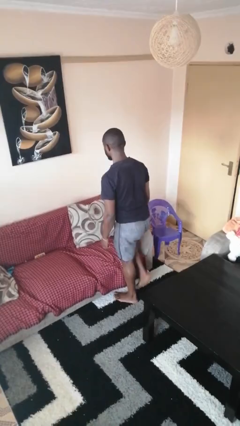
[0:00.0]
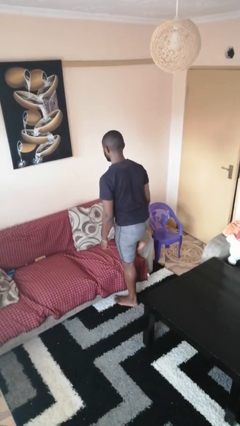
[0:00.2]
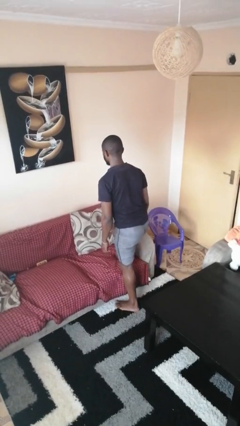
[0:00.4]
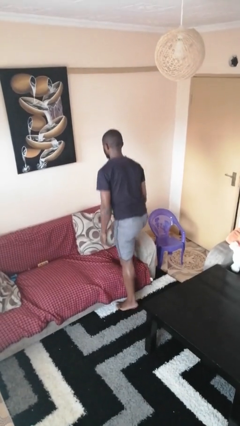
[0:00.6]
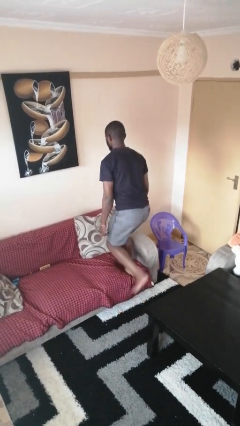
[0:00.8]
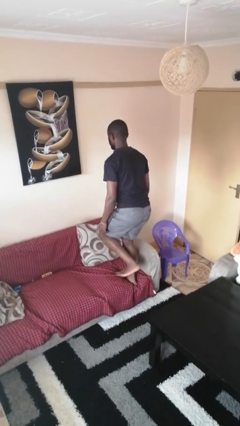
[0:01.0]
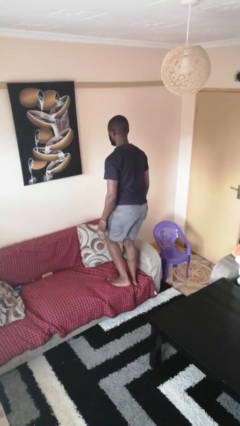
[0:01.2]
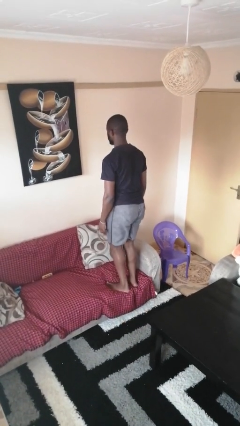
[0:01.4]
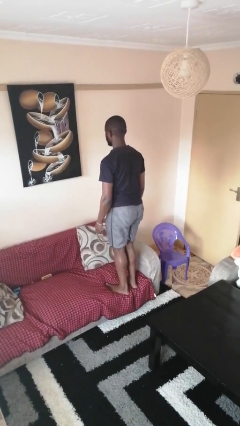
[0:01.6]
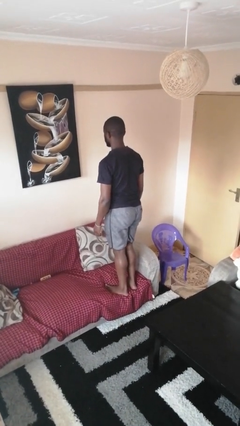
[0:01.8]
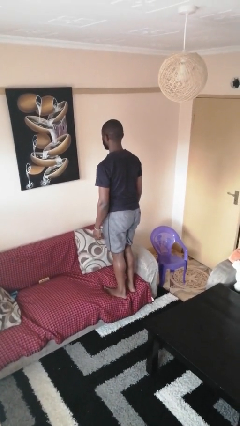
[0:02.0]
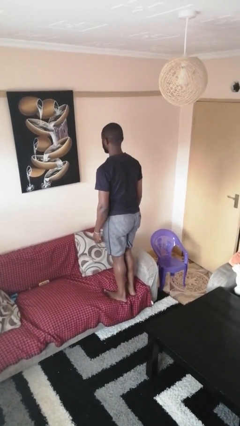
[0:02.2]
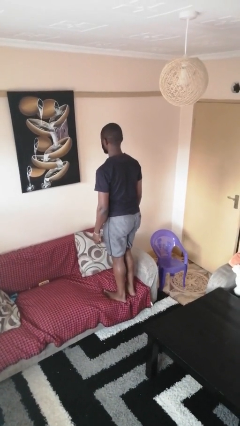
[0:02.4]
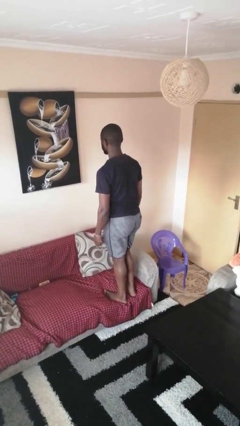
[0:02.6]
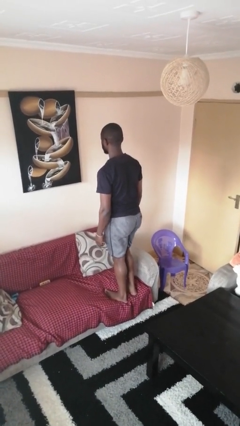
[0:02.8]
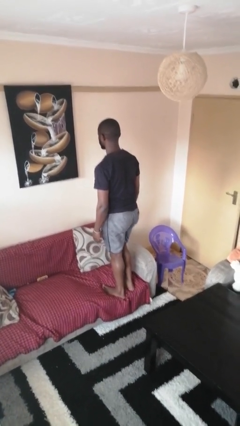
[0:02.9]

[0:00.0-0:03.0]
person climbs on couch

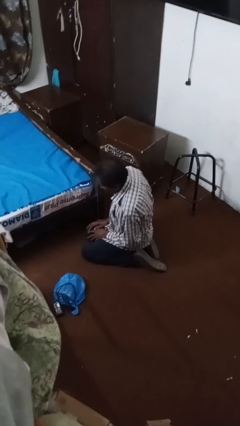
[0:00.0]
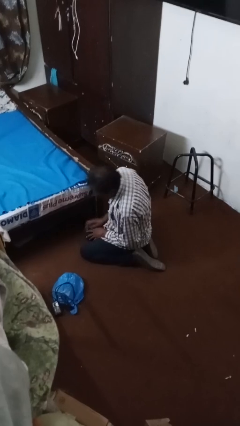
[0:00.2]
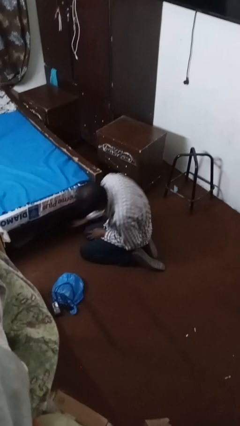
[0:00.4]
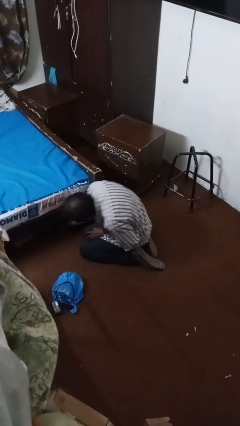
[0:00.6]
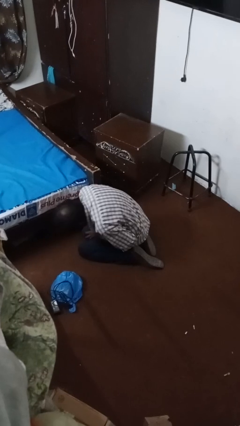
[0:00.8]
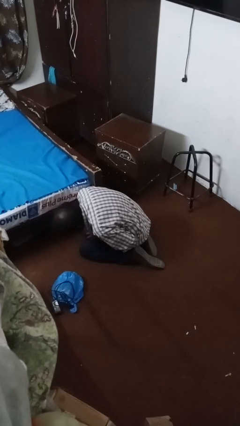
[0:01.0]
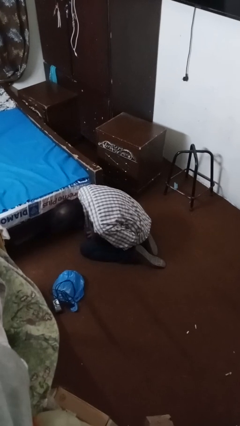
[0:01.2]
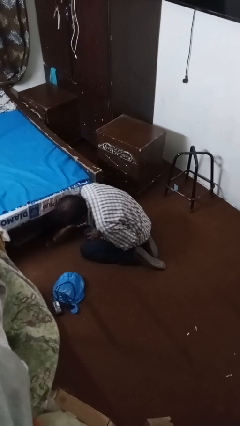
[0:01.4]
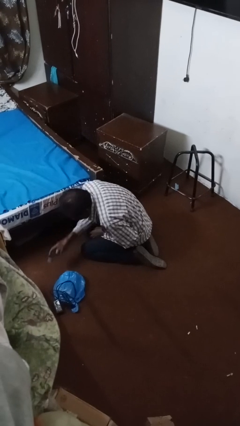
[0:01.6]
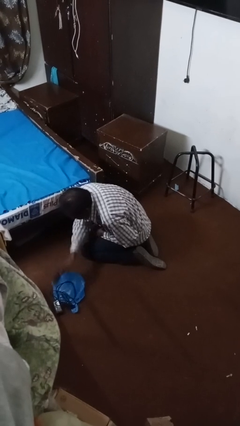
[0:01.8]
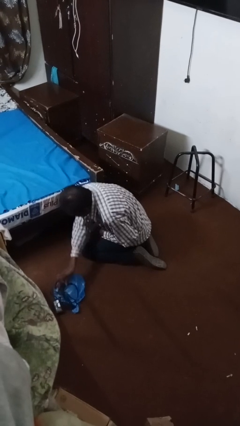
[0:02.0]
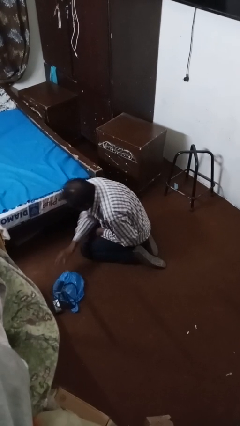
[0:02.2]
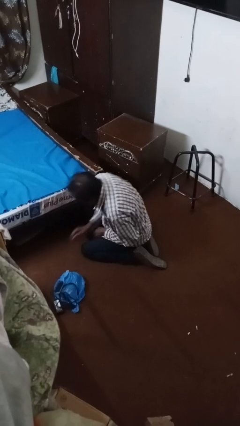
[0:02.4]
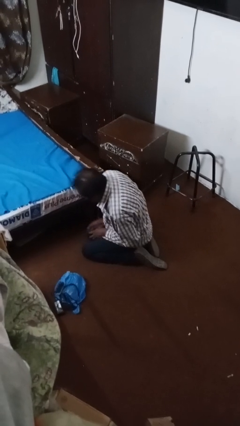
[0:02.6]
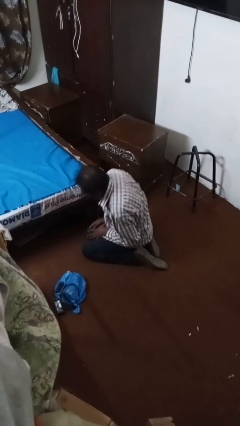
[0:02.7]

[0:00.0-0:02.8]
person searches under bed

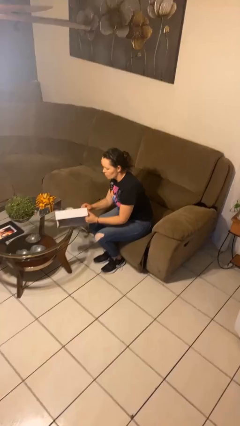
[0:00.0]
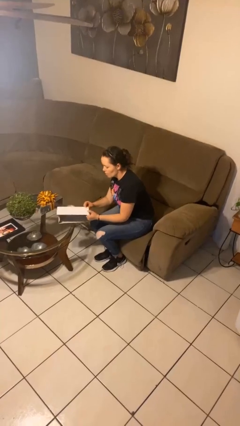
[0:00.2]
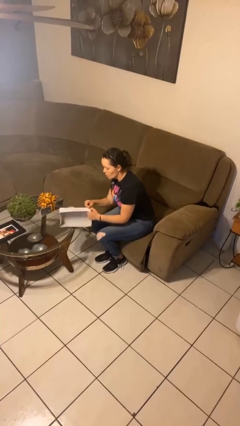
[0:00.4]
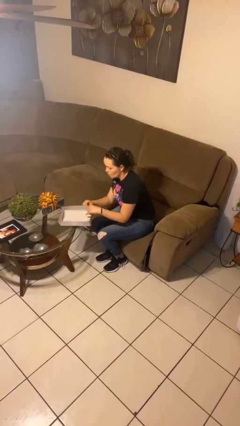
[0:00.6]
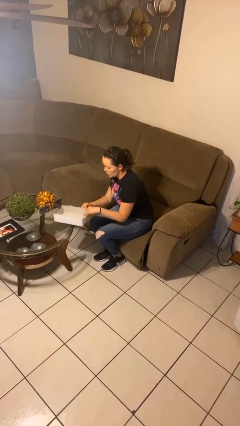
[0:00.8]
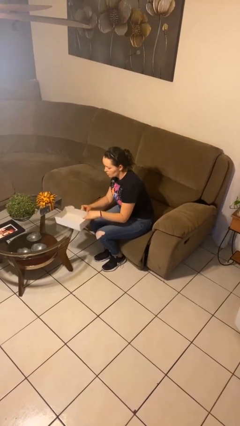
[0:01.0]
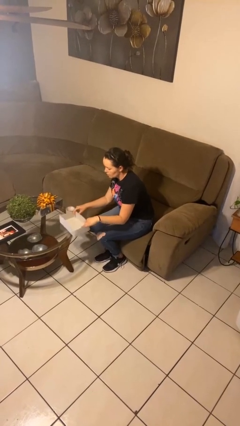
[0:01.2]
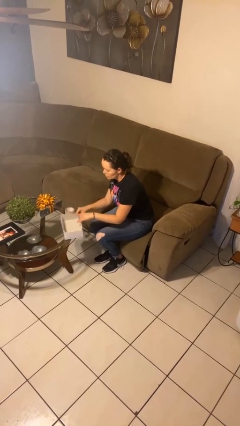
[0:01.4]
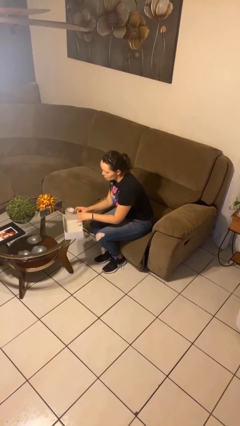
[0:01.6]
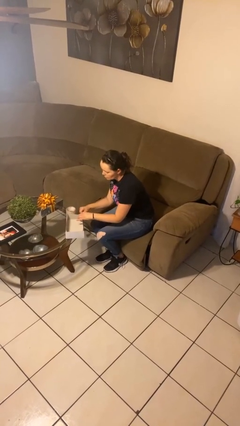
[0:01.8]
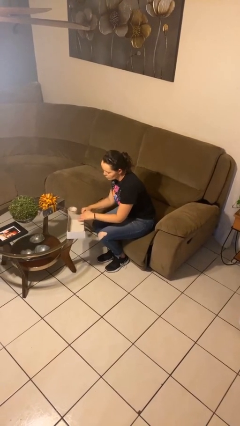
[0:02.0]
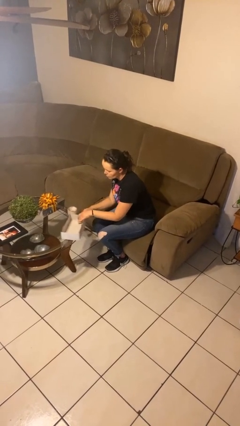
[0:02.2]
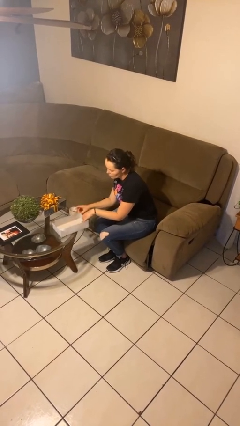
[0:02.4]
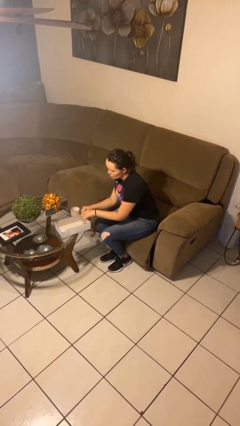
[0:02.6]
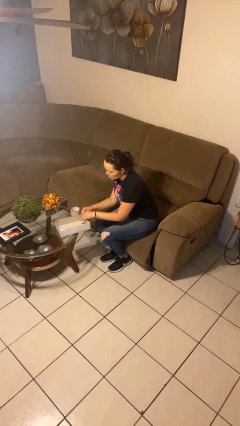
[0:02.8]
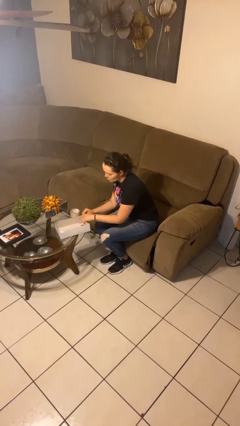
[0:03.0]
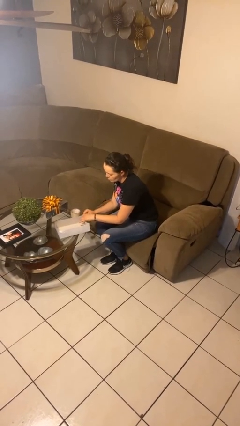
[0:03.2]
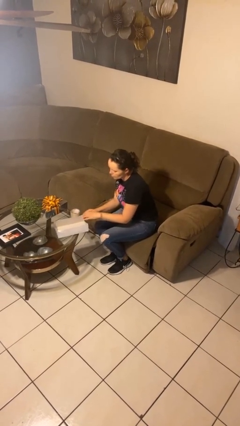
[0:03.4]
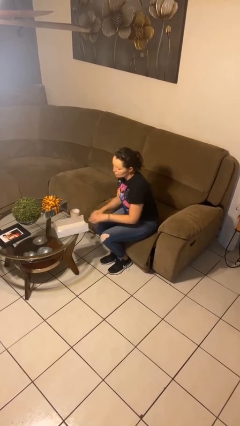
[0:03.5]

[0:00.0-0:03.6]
person wraps box

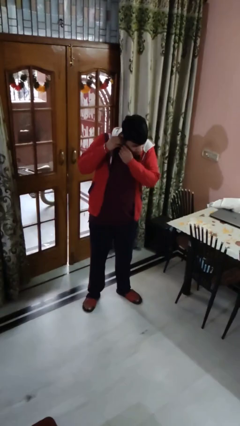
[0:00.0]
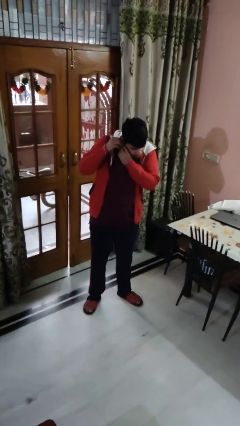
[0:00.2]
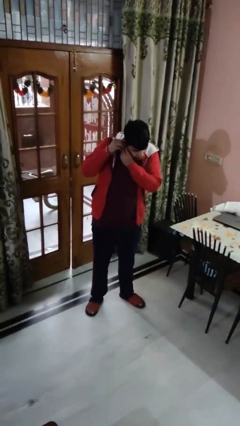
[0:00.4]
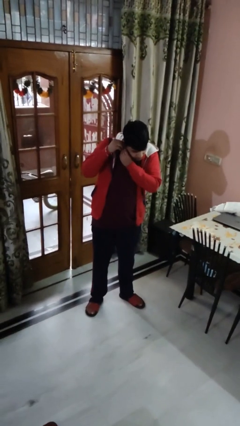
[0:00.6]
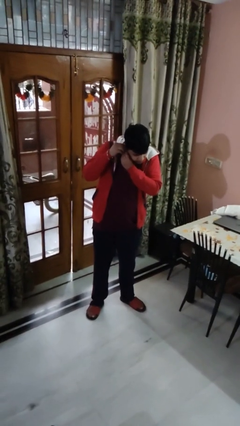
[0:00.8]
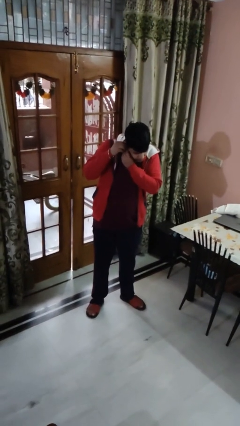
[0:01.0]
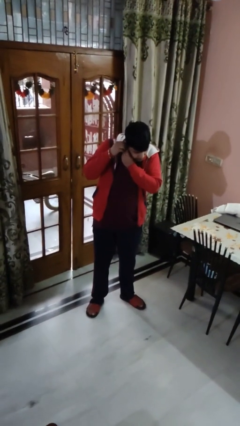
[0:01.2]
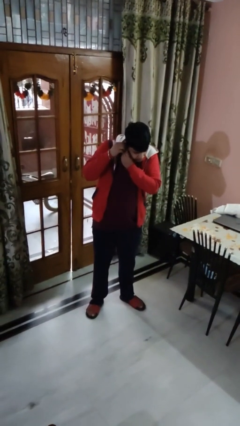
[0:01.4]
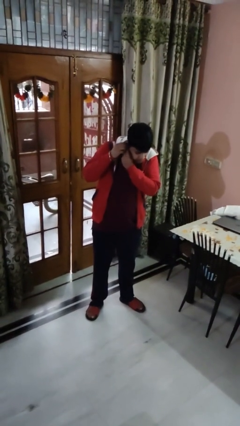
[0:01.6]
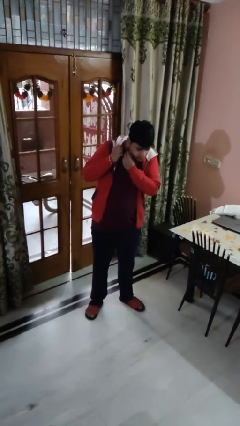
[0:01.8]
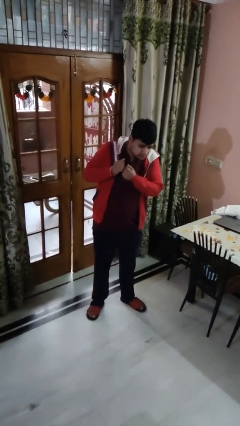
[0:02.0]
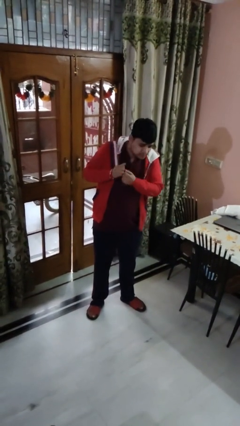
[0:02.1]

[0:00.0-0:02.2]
person puts on earrings

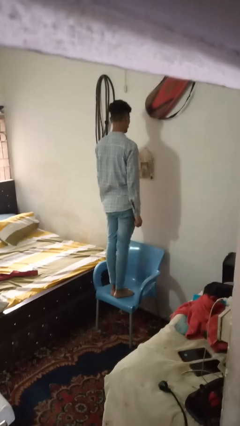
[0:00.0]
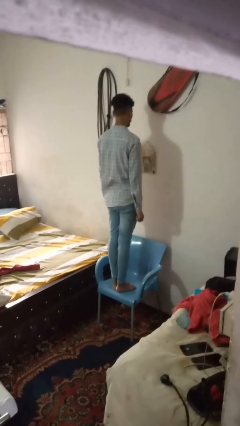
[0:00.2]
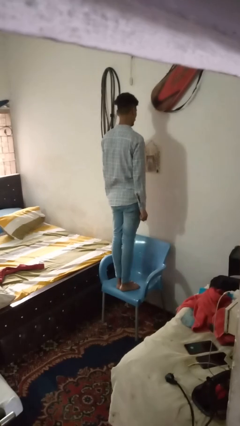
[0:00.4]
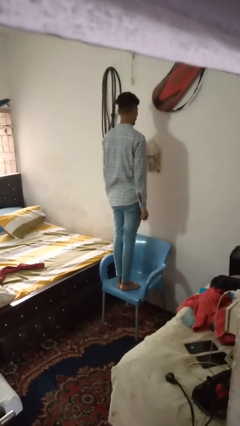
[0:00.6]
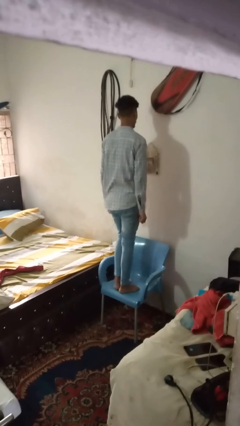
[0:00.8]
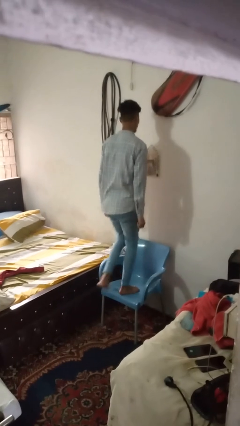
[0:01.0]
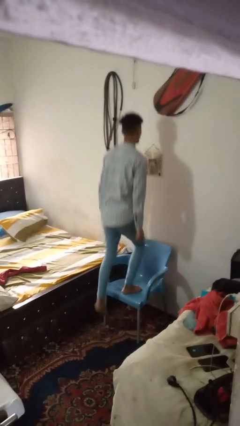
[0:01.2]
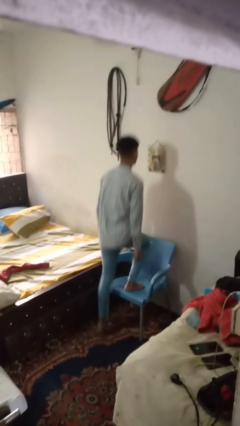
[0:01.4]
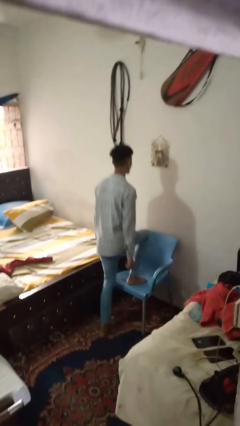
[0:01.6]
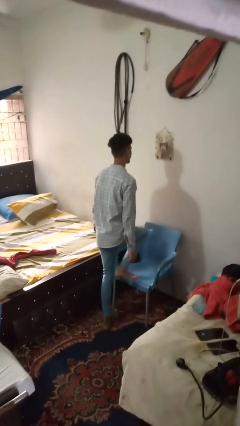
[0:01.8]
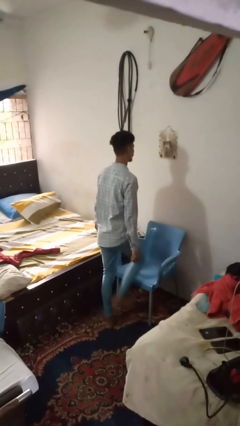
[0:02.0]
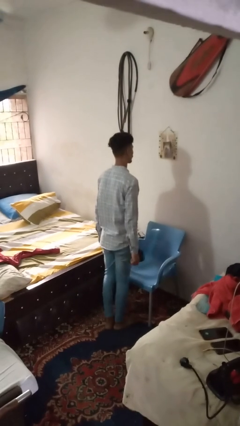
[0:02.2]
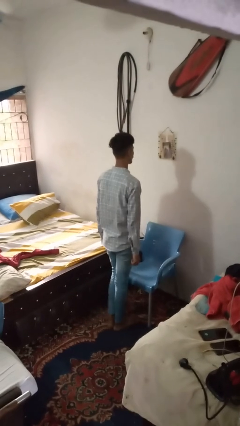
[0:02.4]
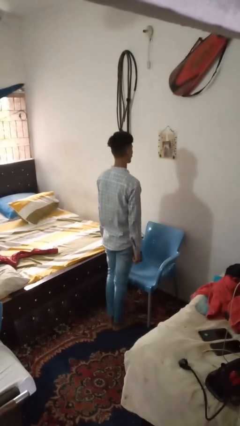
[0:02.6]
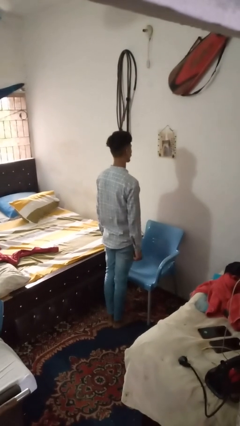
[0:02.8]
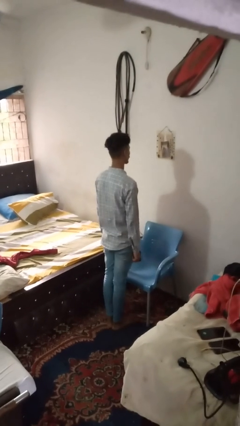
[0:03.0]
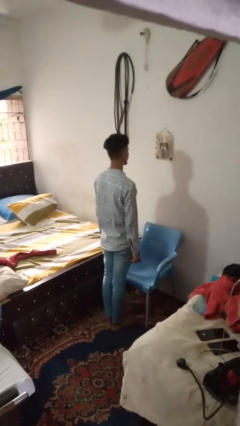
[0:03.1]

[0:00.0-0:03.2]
person climbs off chair

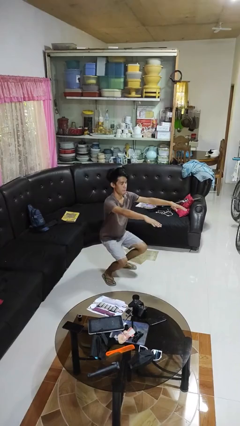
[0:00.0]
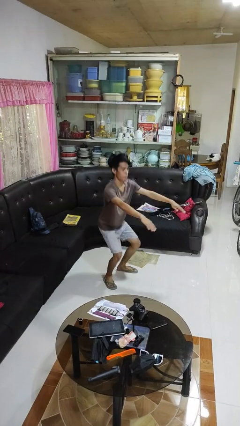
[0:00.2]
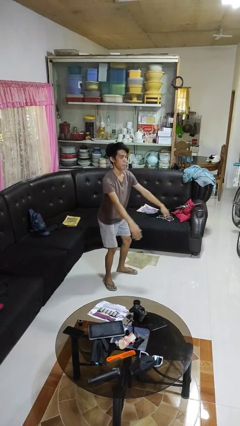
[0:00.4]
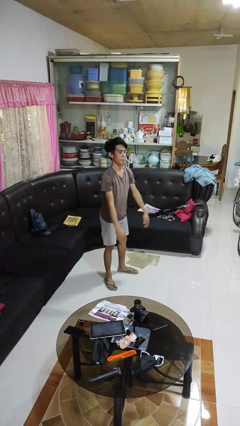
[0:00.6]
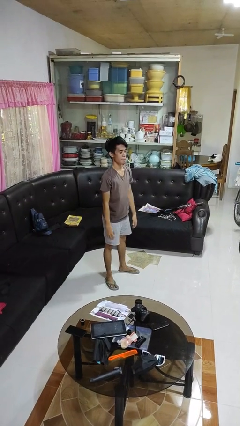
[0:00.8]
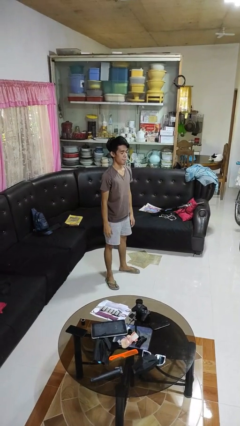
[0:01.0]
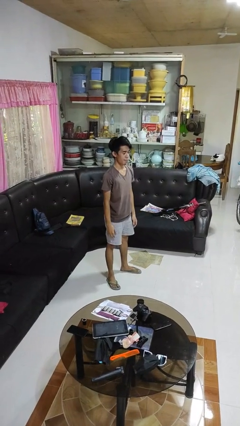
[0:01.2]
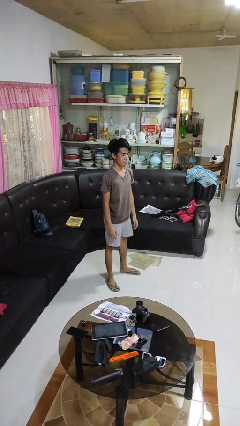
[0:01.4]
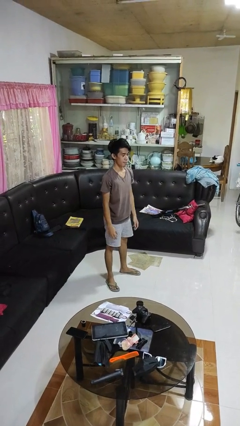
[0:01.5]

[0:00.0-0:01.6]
person stands up

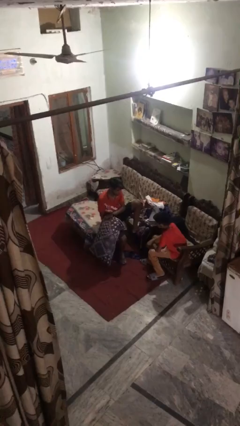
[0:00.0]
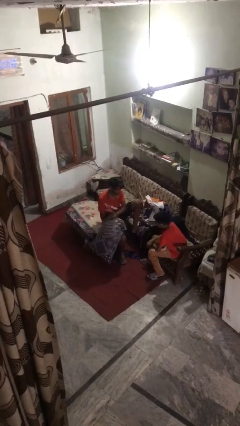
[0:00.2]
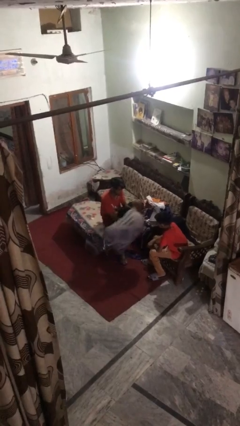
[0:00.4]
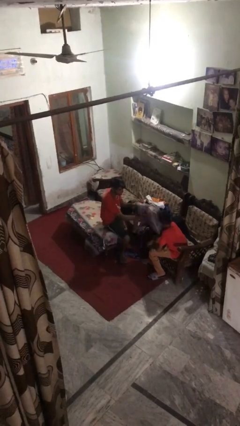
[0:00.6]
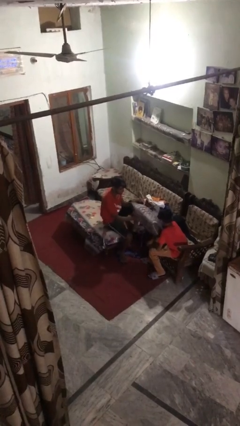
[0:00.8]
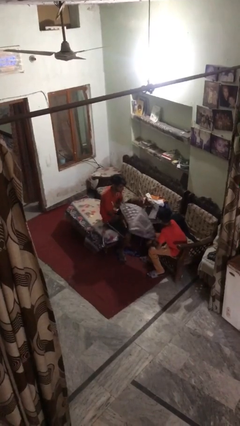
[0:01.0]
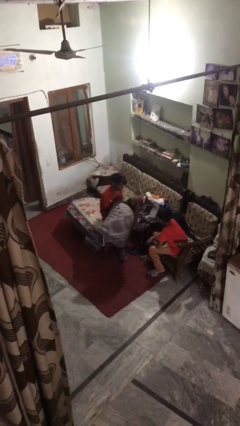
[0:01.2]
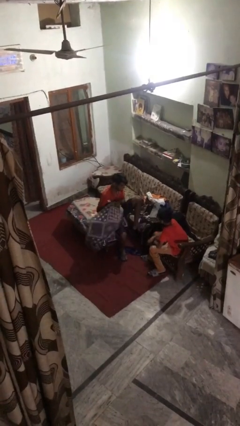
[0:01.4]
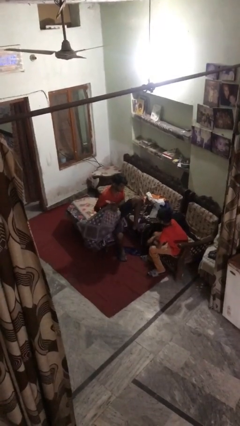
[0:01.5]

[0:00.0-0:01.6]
person hits person with pillow
